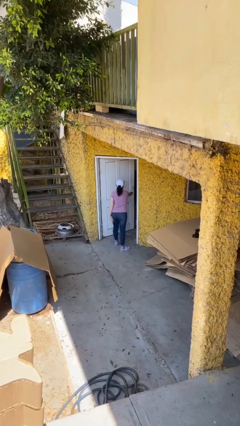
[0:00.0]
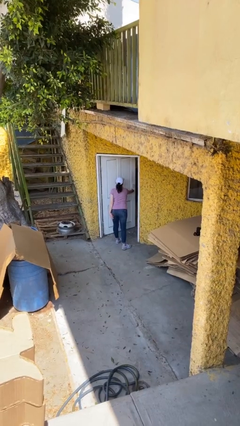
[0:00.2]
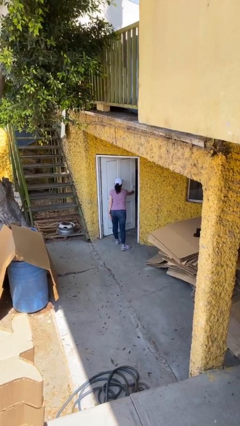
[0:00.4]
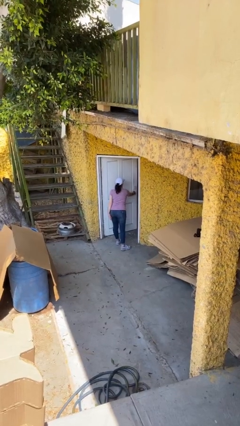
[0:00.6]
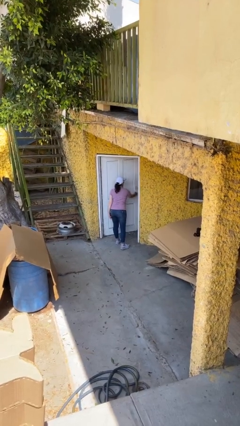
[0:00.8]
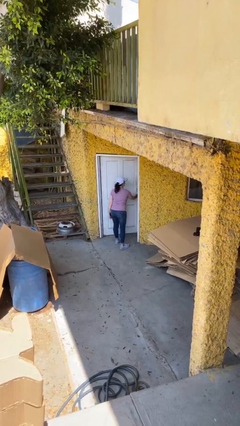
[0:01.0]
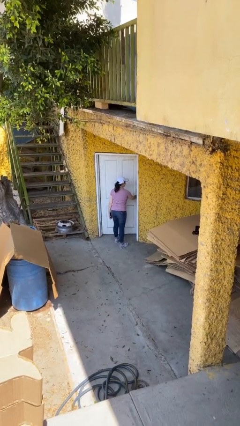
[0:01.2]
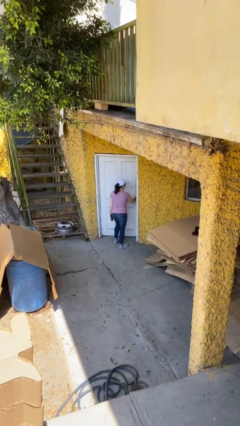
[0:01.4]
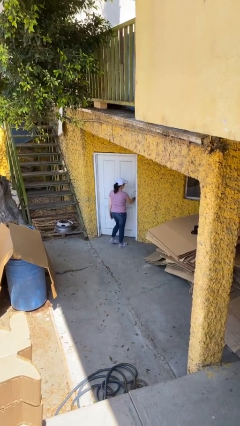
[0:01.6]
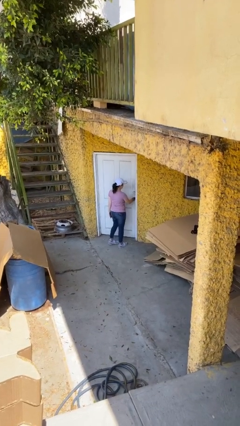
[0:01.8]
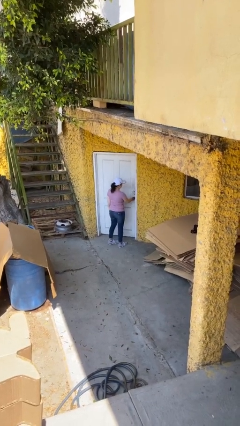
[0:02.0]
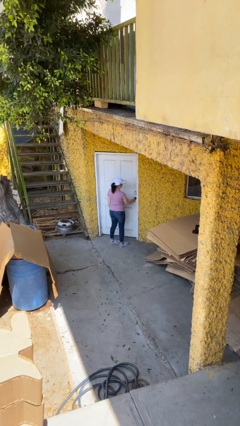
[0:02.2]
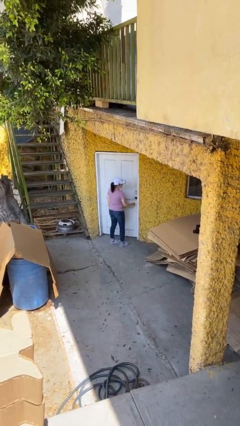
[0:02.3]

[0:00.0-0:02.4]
person closes facility door

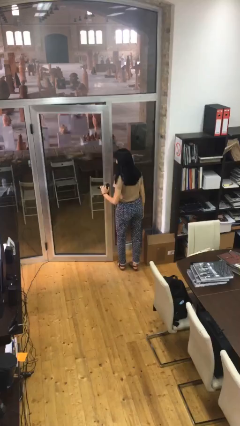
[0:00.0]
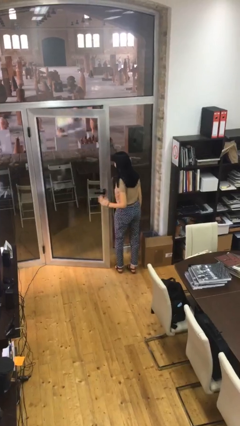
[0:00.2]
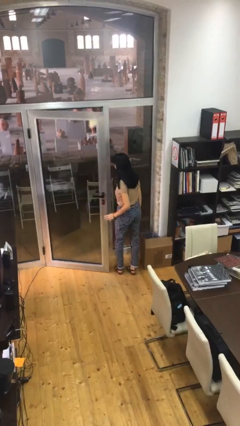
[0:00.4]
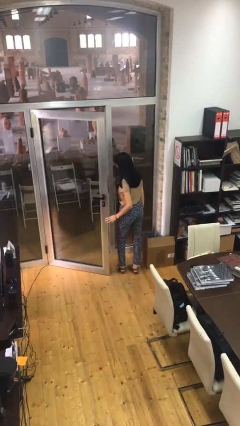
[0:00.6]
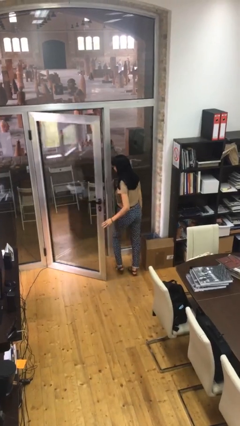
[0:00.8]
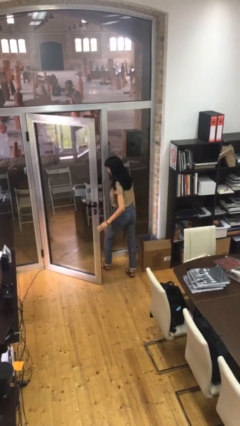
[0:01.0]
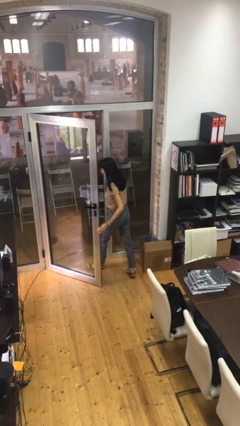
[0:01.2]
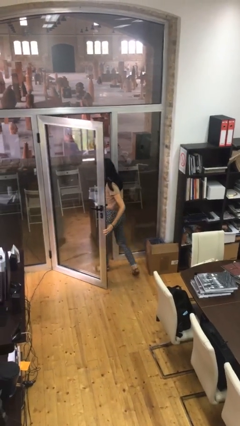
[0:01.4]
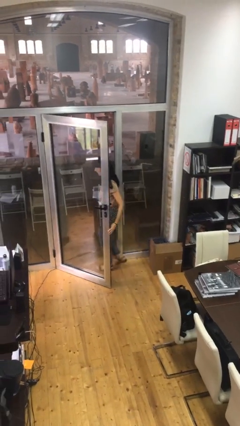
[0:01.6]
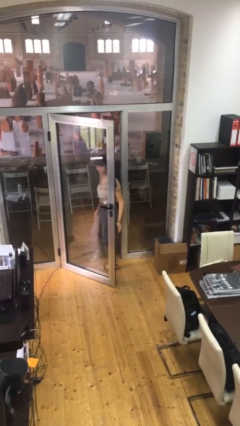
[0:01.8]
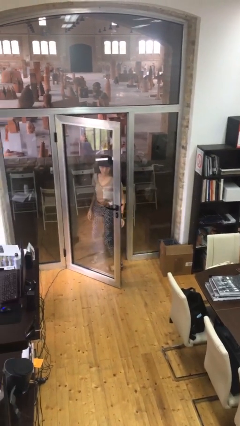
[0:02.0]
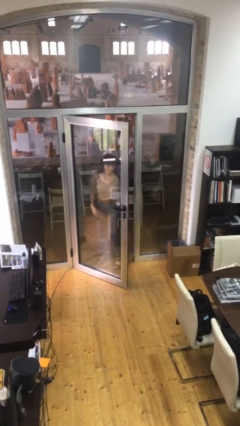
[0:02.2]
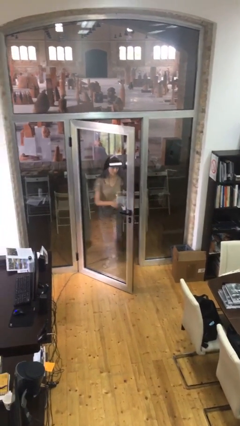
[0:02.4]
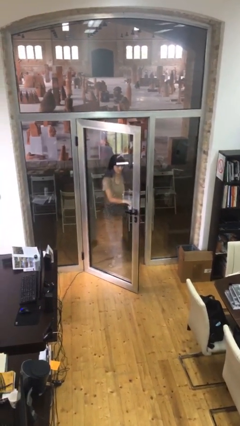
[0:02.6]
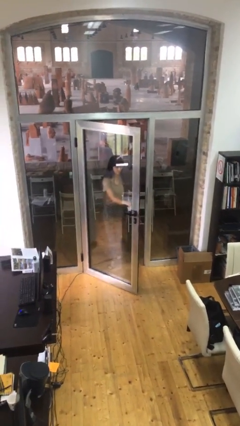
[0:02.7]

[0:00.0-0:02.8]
person exits scene through structure

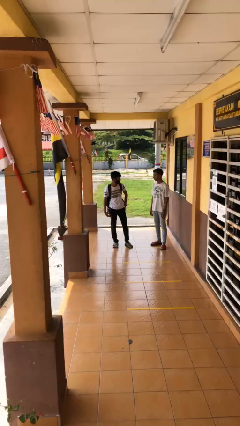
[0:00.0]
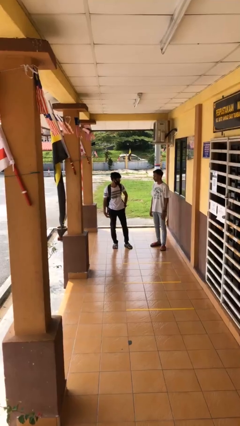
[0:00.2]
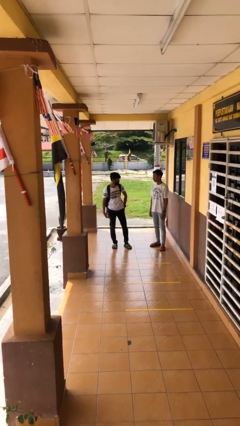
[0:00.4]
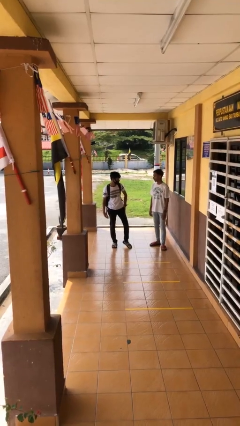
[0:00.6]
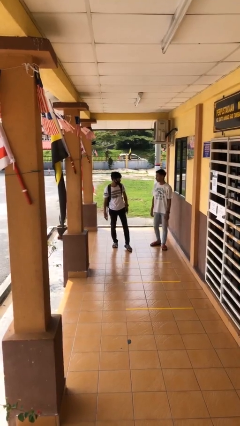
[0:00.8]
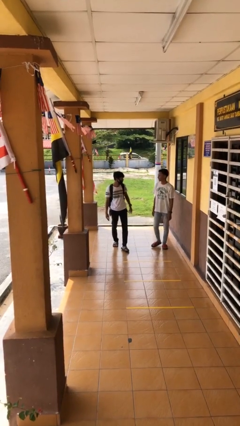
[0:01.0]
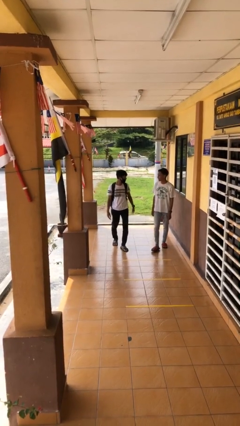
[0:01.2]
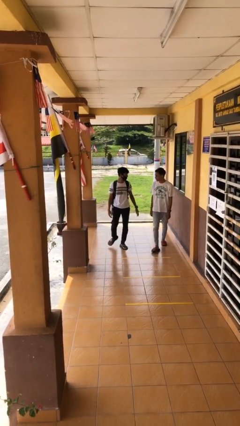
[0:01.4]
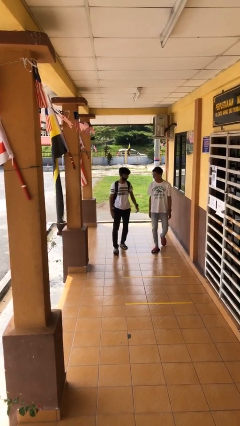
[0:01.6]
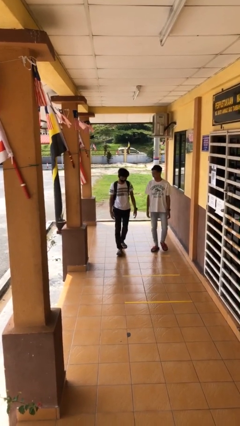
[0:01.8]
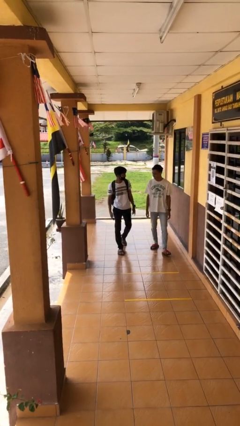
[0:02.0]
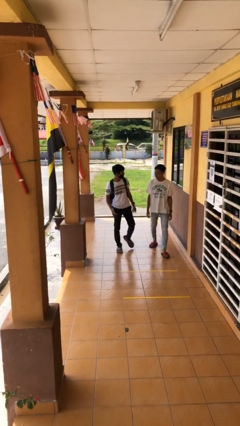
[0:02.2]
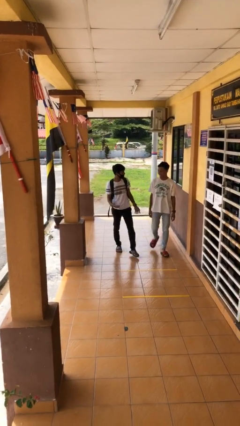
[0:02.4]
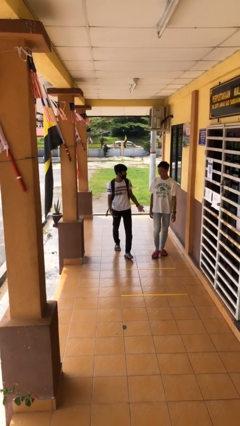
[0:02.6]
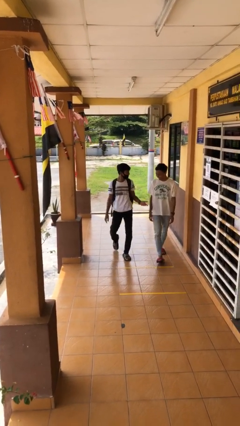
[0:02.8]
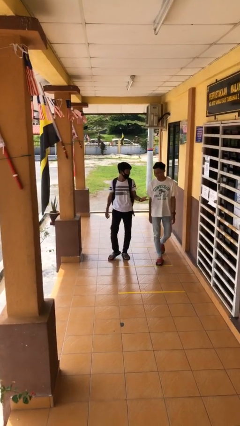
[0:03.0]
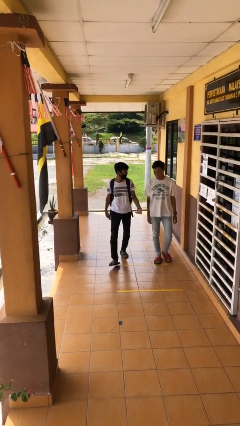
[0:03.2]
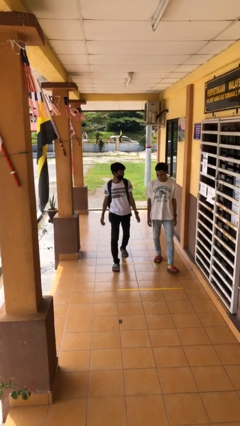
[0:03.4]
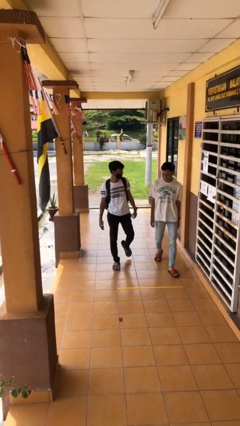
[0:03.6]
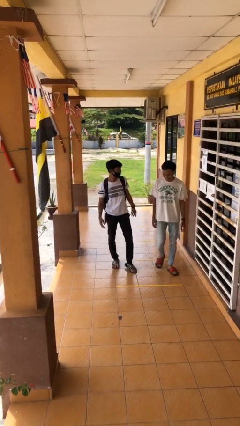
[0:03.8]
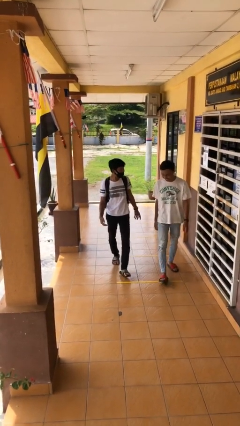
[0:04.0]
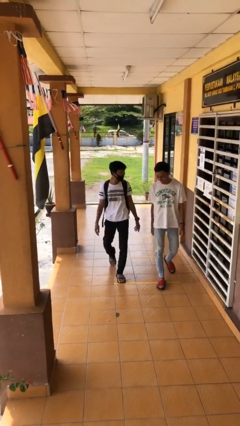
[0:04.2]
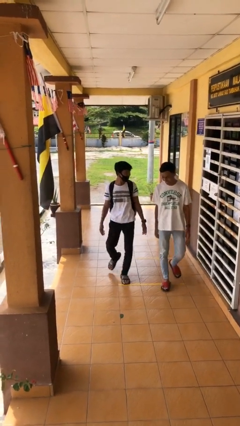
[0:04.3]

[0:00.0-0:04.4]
person talks to person

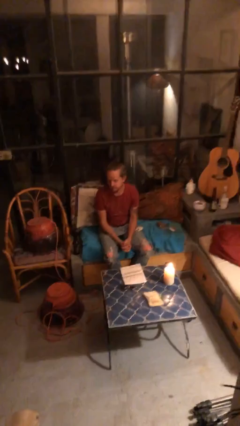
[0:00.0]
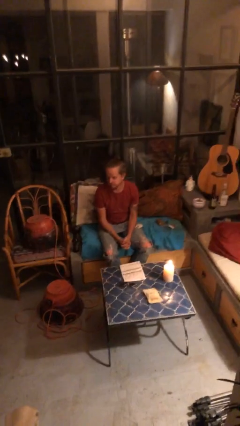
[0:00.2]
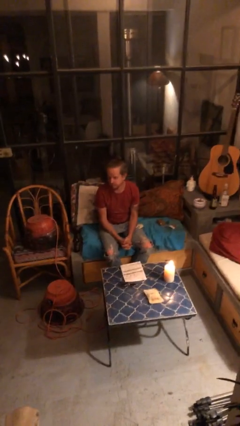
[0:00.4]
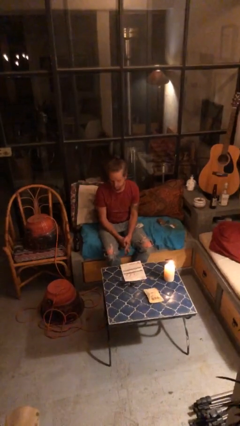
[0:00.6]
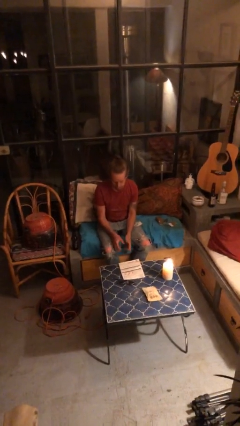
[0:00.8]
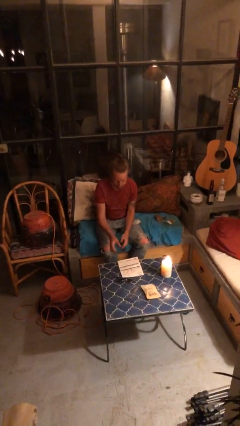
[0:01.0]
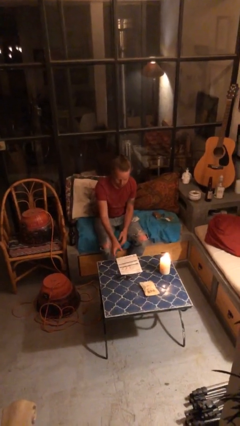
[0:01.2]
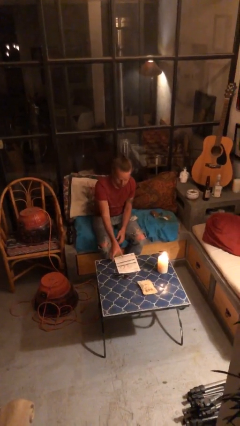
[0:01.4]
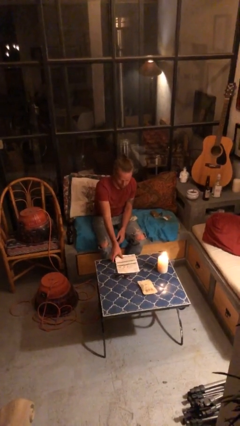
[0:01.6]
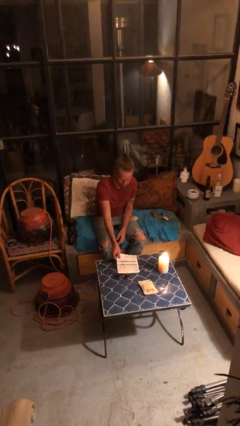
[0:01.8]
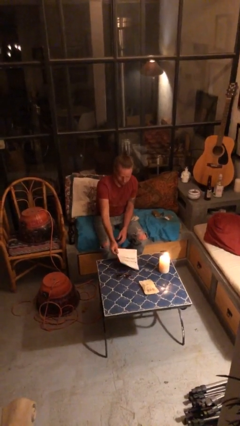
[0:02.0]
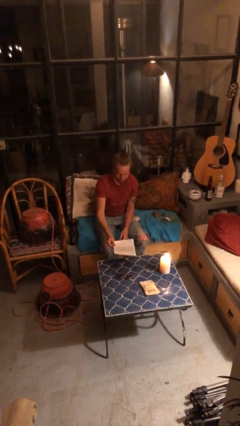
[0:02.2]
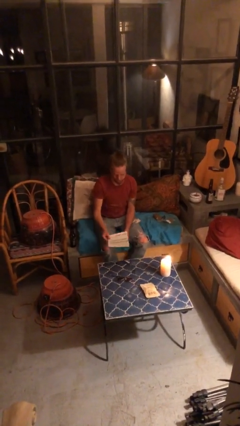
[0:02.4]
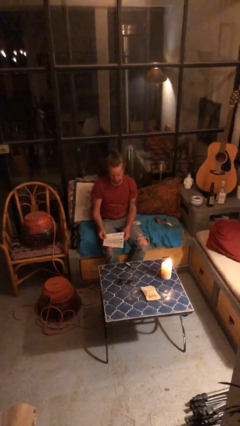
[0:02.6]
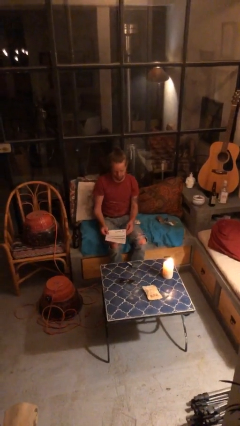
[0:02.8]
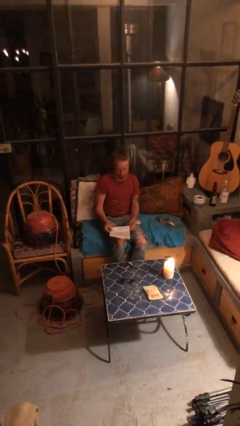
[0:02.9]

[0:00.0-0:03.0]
person picks up object from table

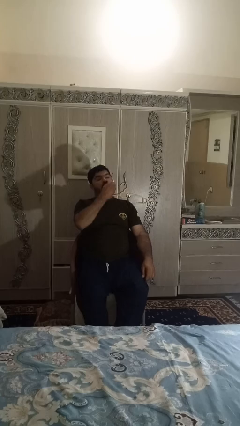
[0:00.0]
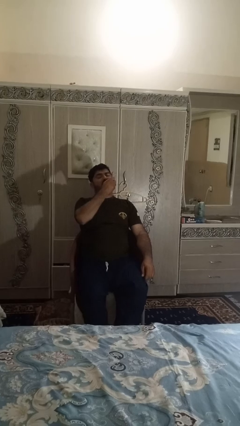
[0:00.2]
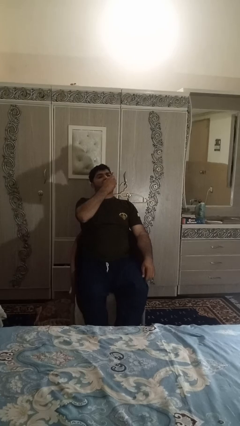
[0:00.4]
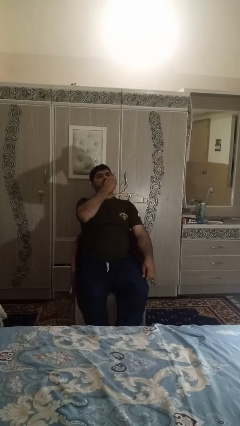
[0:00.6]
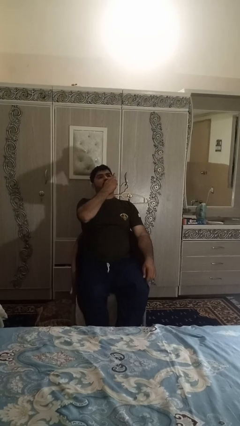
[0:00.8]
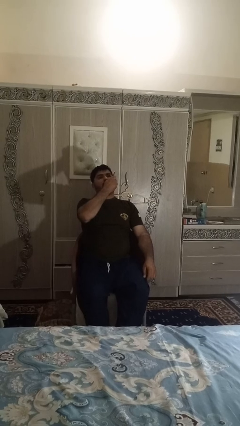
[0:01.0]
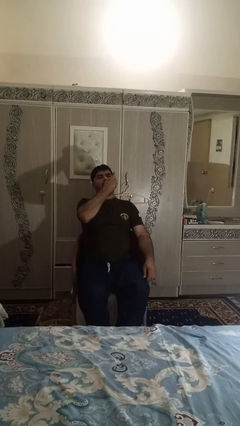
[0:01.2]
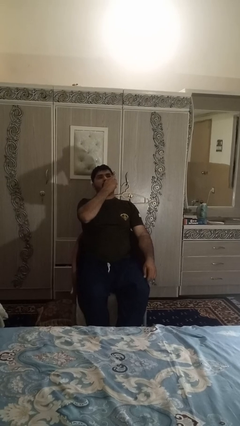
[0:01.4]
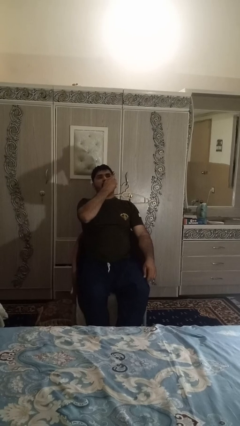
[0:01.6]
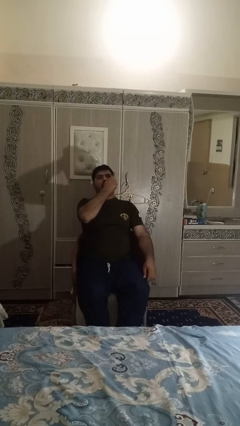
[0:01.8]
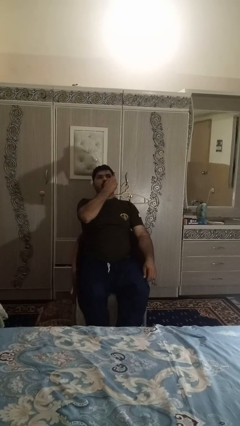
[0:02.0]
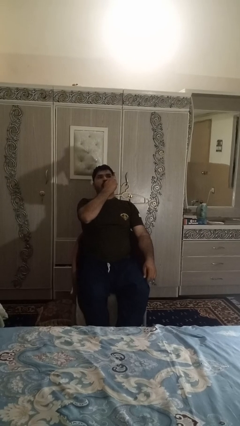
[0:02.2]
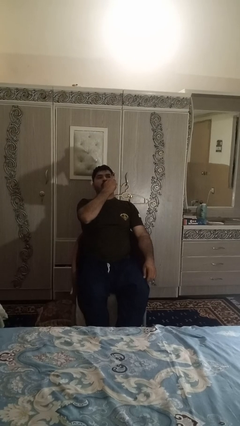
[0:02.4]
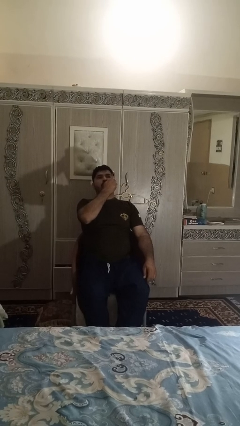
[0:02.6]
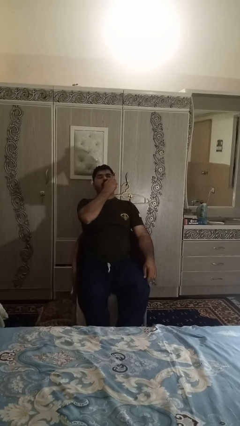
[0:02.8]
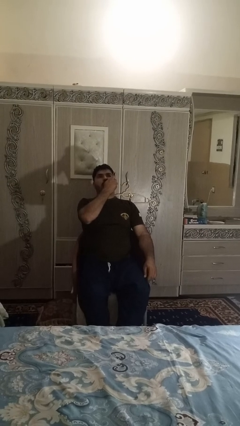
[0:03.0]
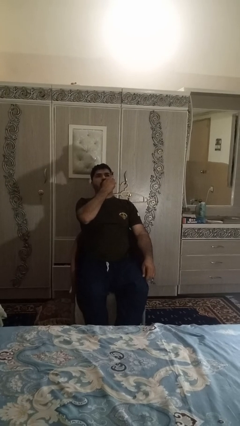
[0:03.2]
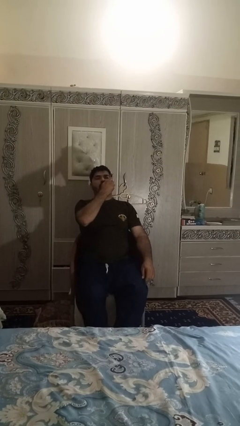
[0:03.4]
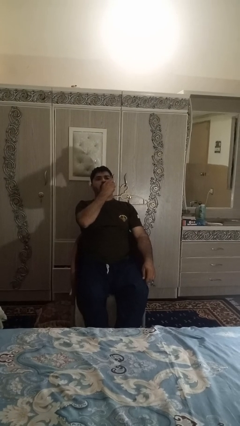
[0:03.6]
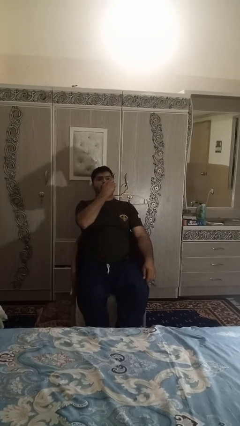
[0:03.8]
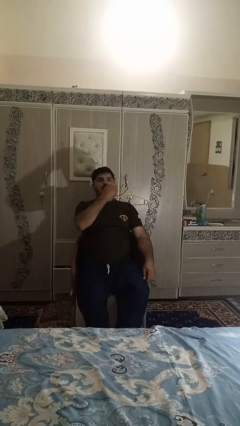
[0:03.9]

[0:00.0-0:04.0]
person flosses

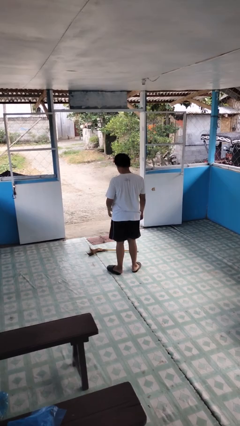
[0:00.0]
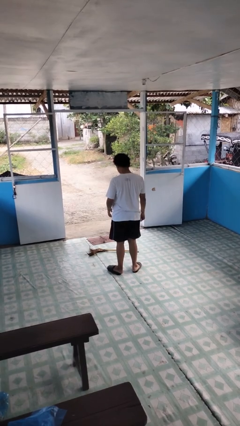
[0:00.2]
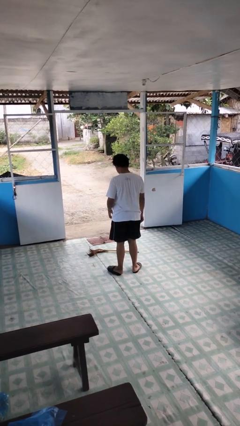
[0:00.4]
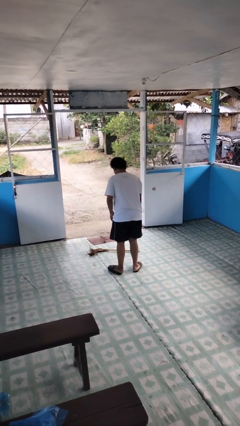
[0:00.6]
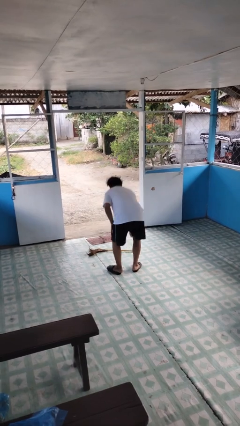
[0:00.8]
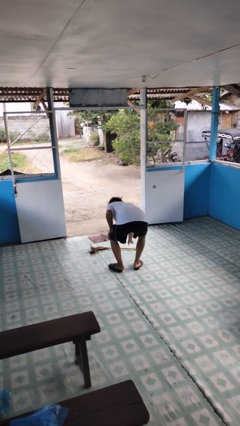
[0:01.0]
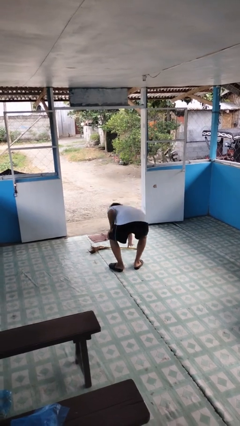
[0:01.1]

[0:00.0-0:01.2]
person picks up object from floor
